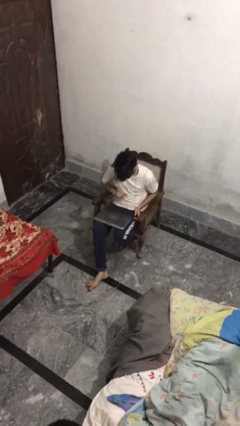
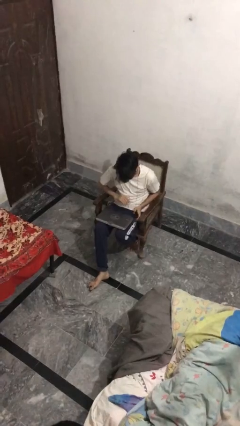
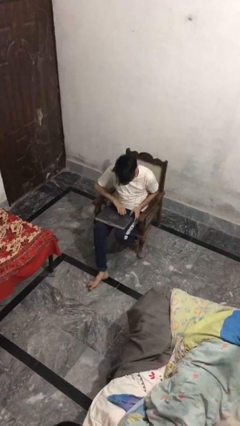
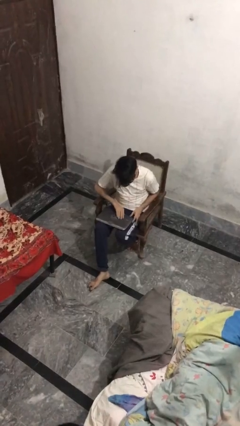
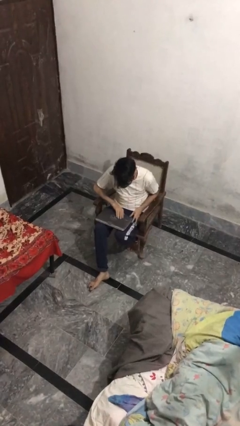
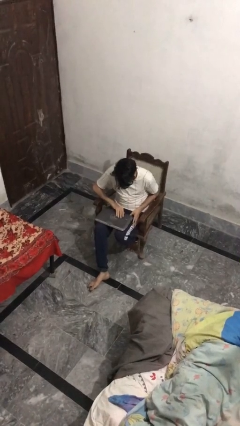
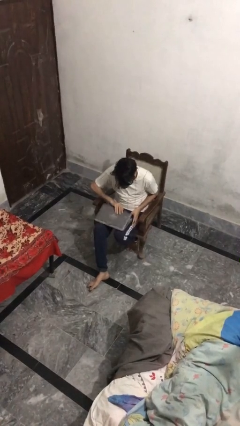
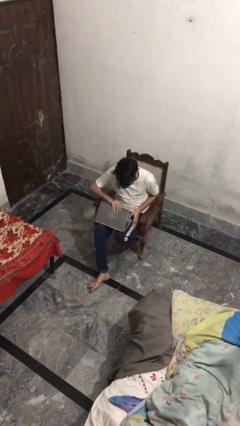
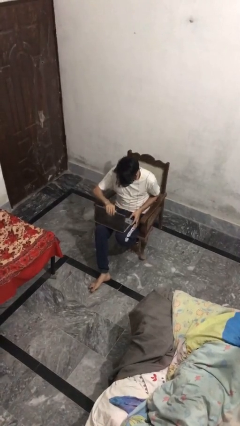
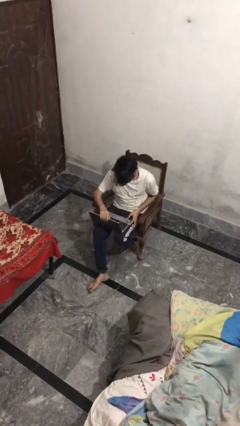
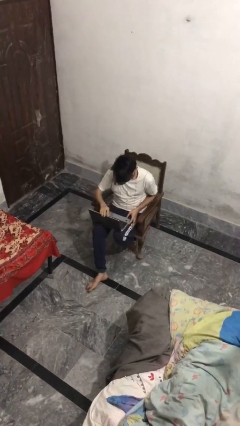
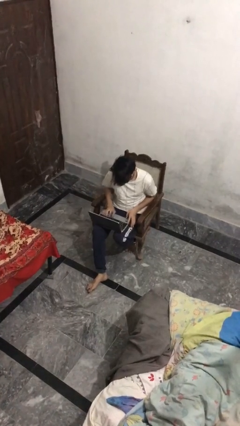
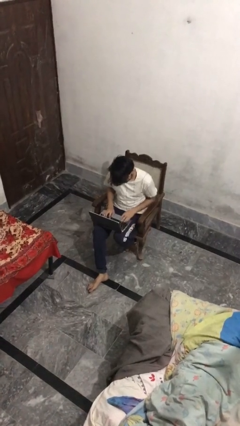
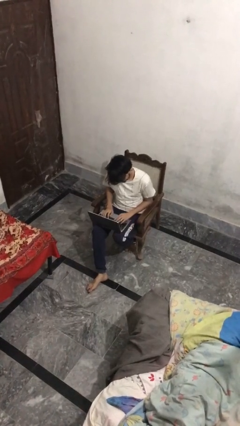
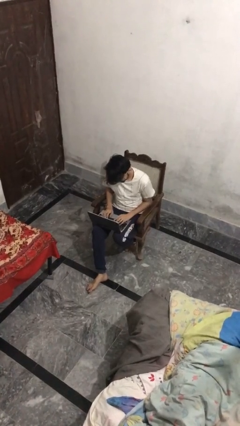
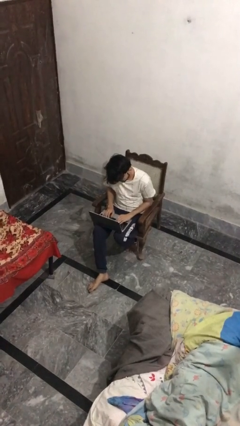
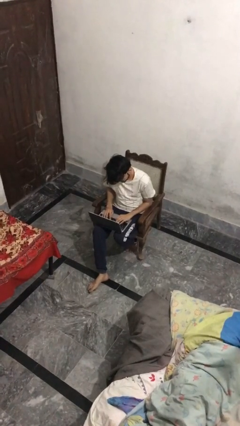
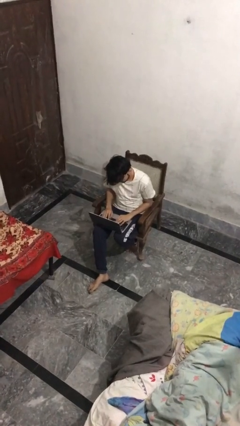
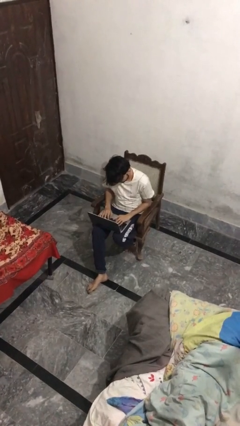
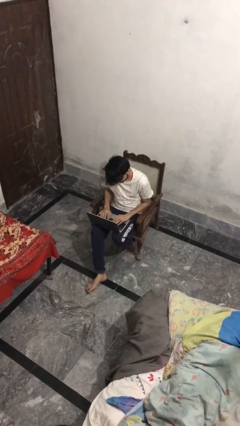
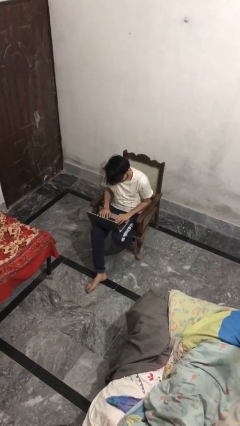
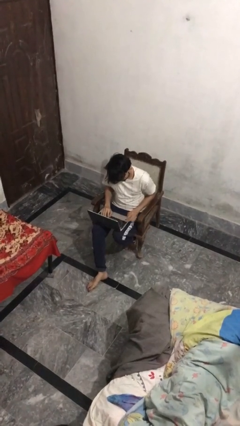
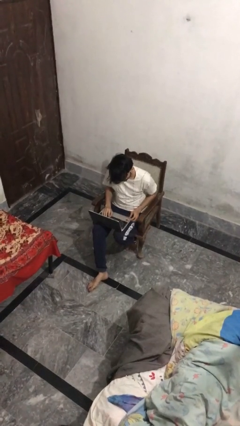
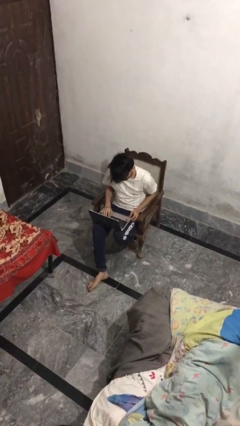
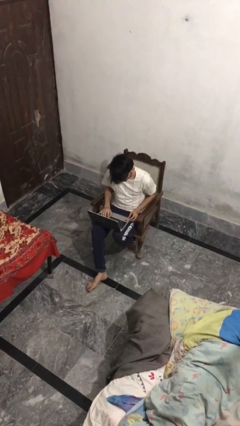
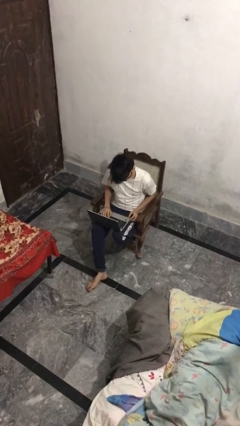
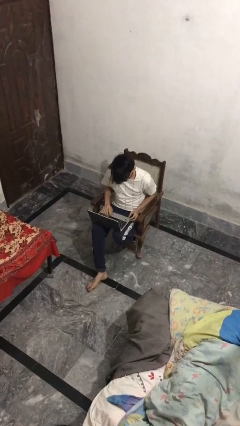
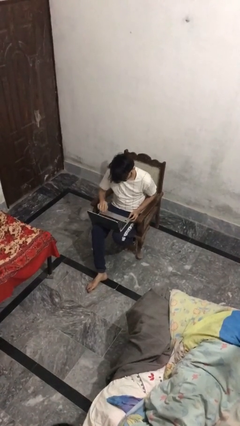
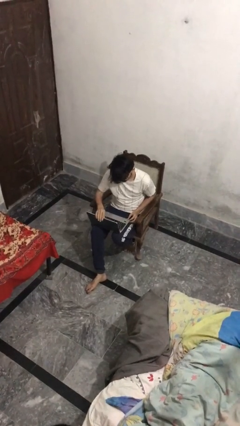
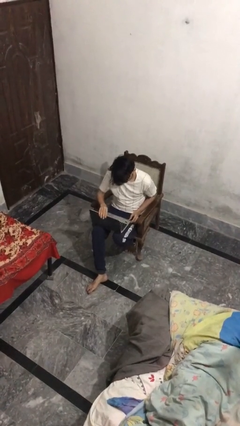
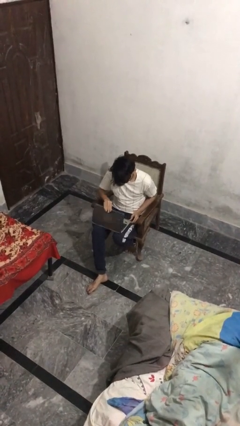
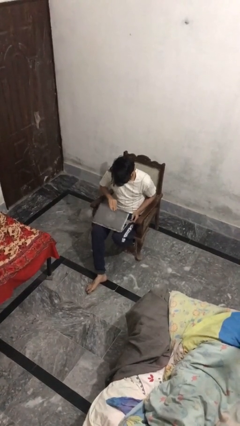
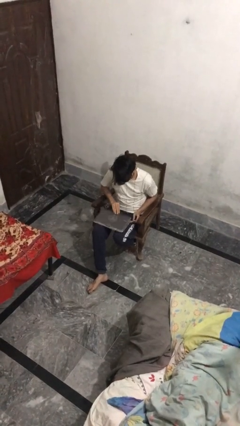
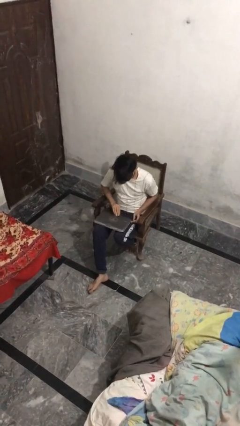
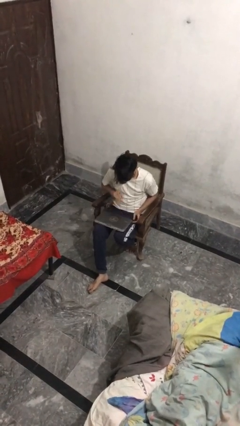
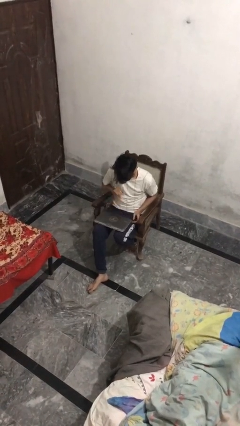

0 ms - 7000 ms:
person interacts with laptop

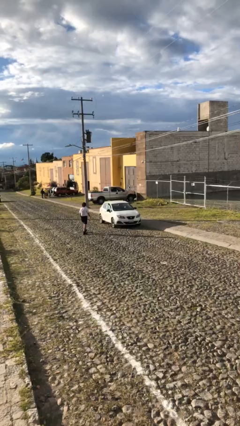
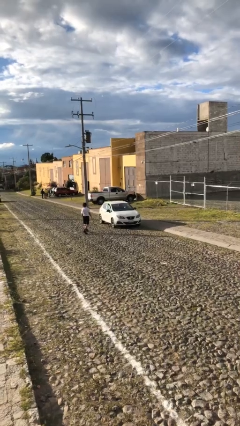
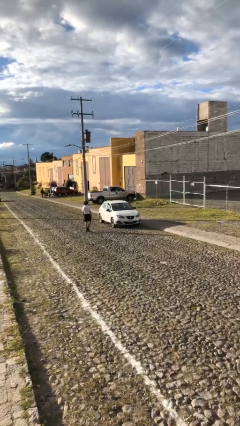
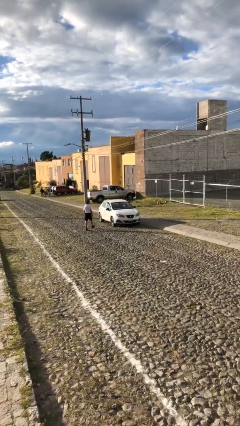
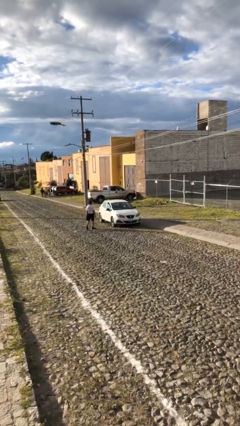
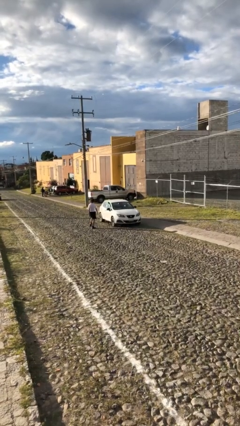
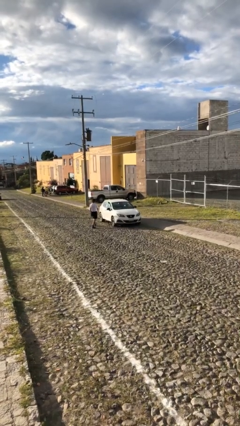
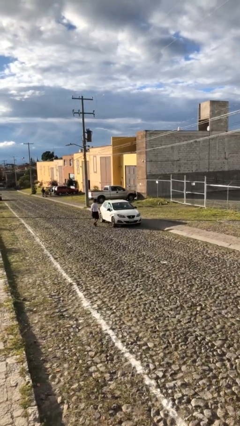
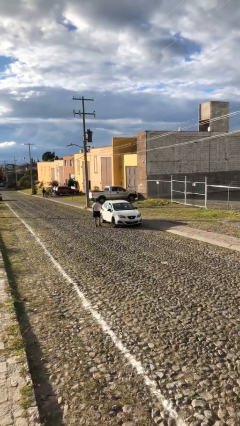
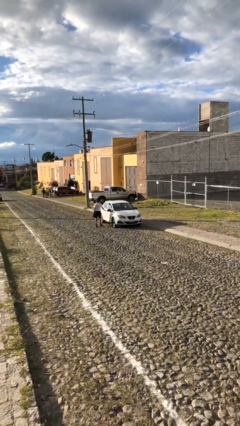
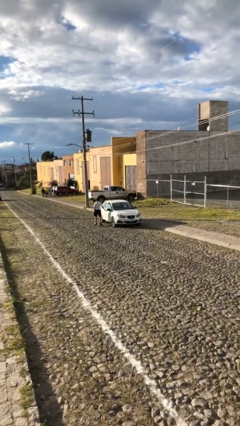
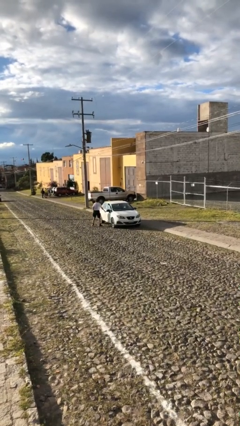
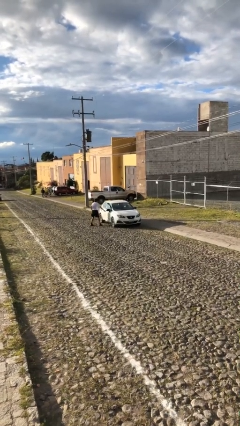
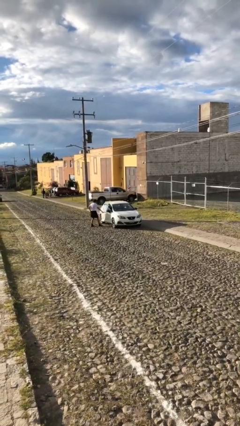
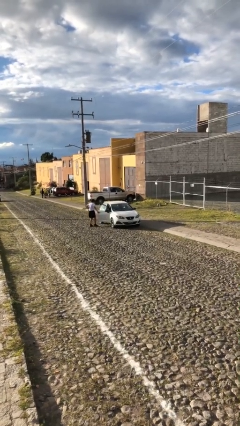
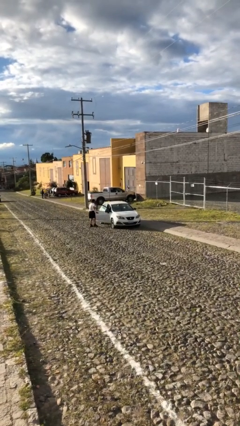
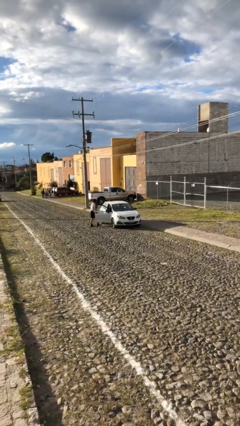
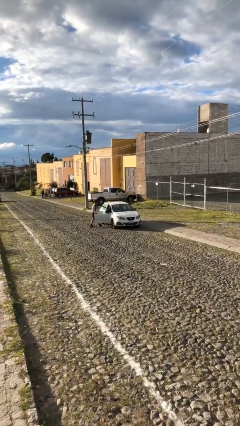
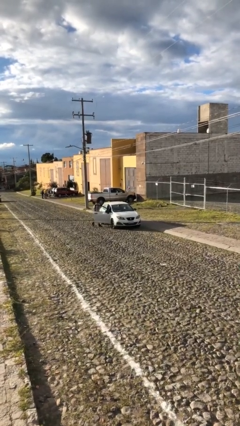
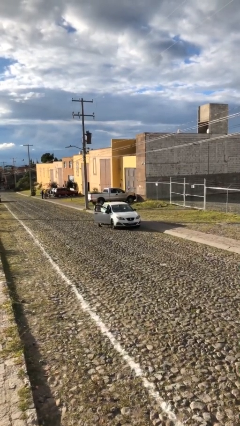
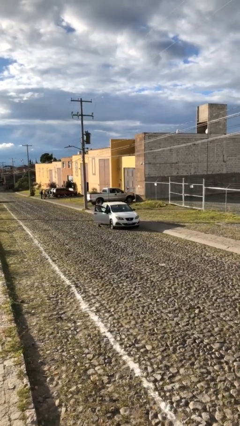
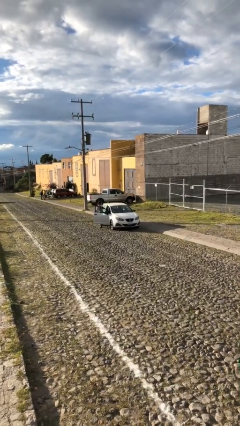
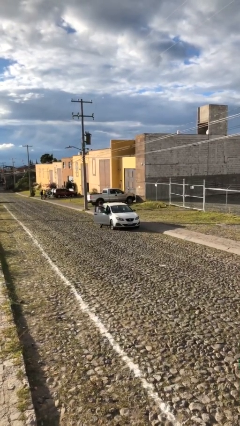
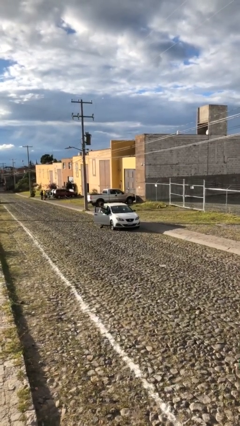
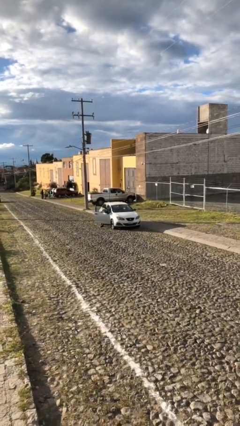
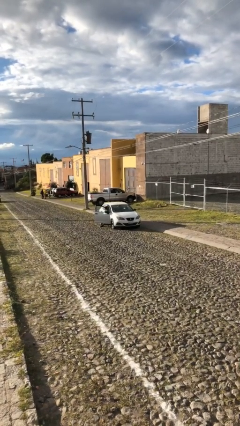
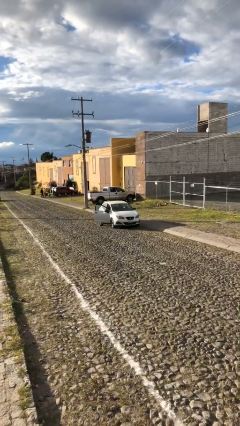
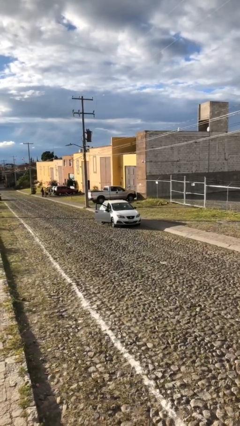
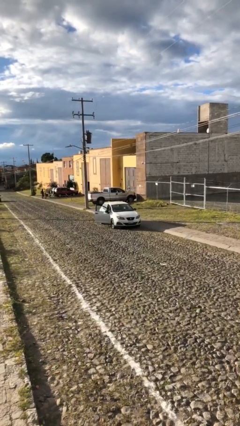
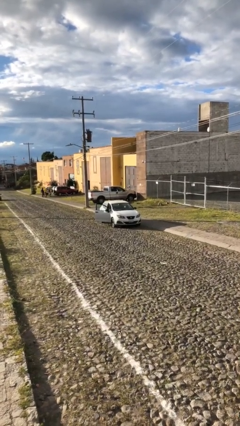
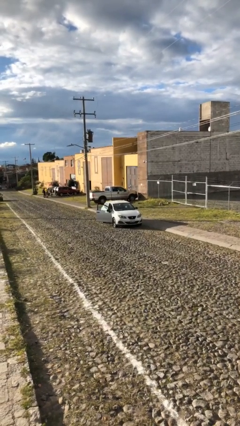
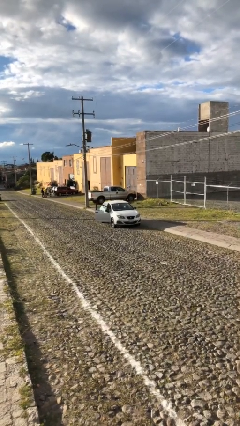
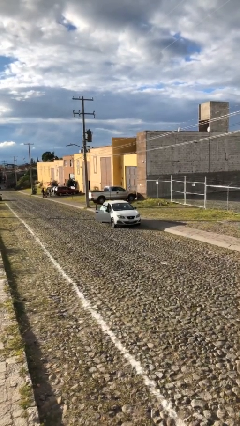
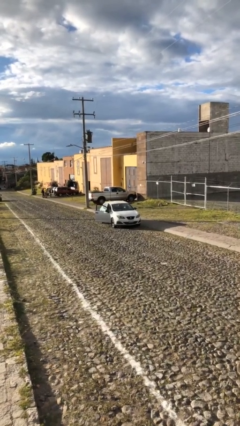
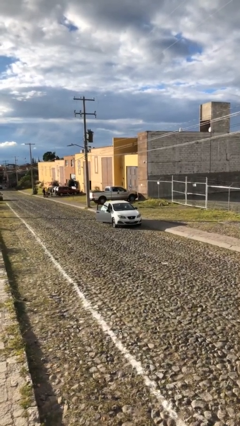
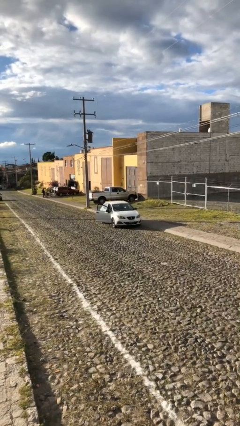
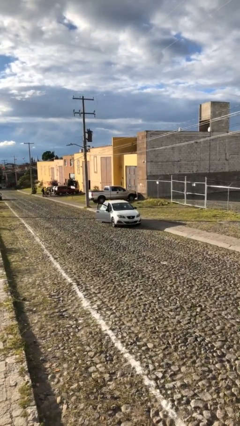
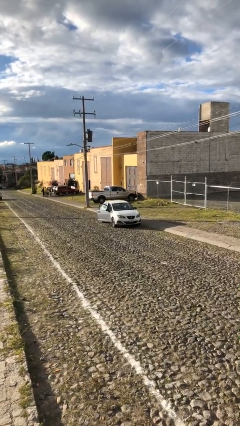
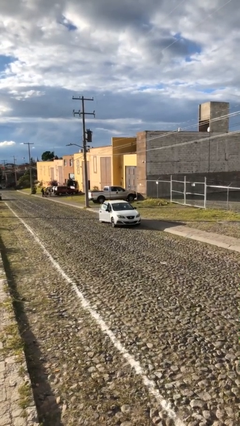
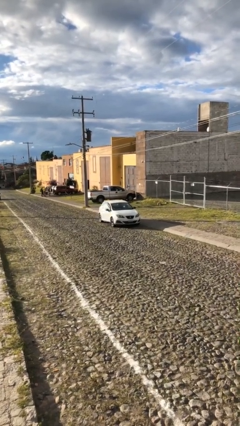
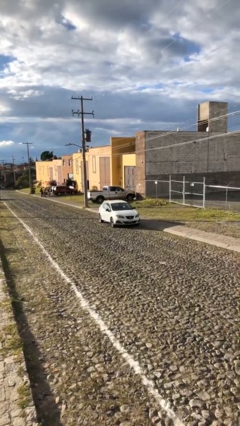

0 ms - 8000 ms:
car picks up person

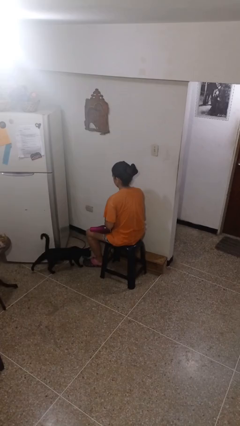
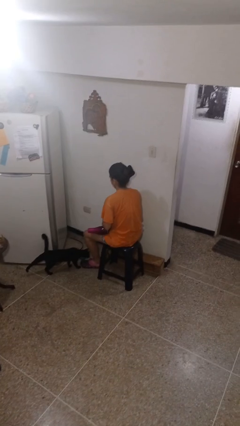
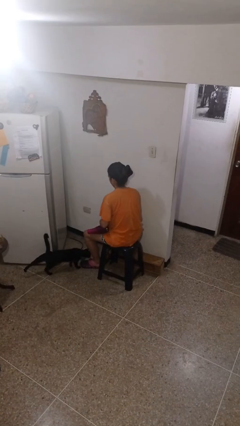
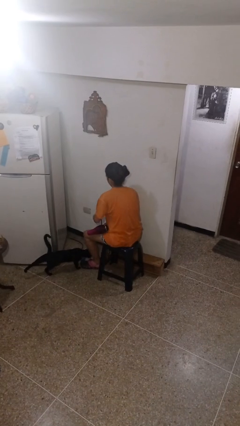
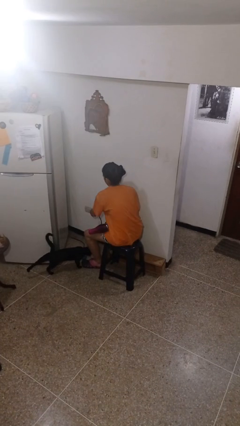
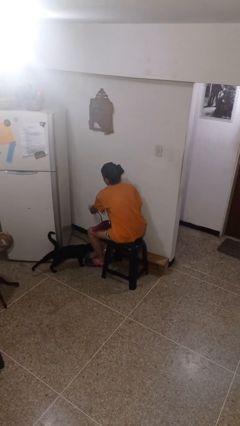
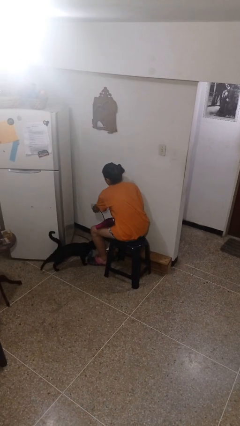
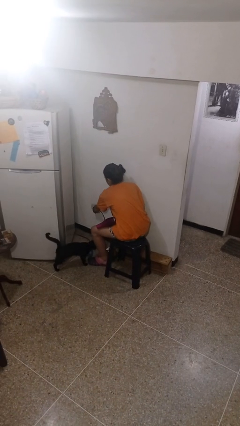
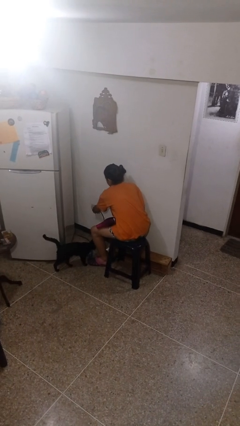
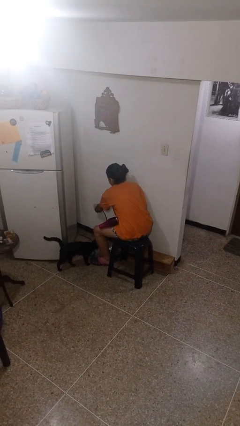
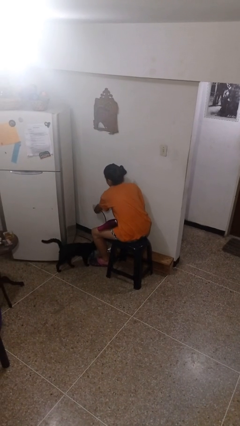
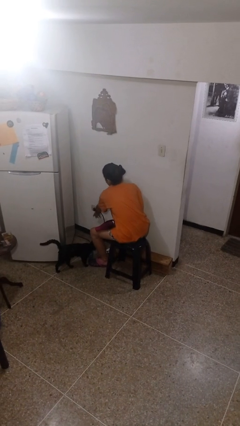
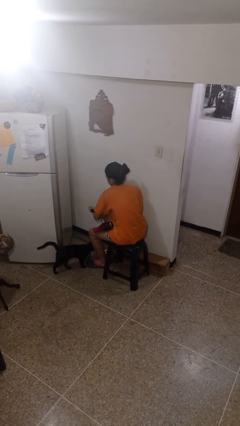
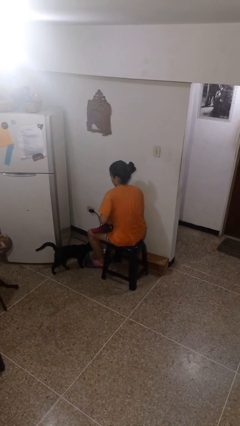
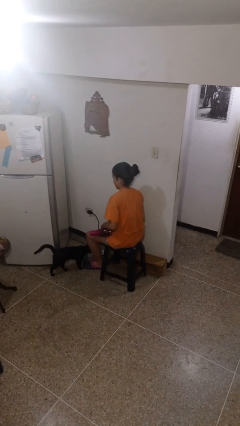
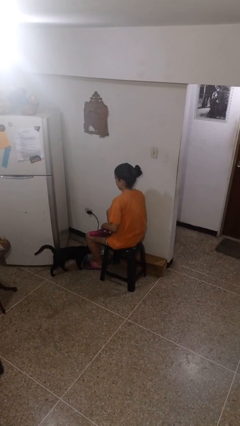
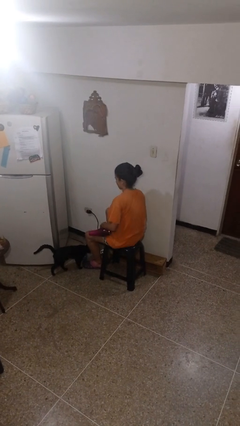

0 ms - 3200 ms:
person plugs into electrical socket
